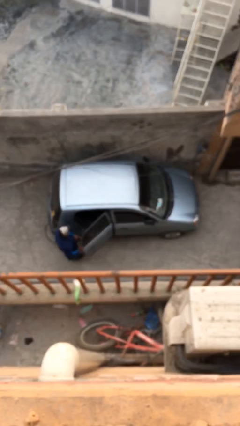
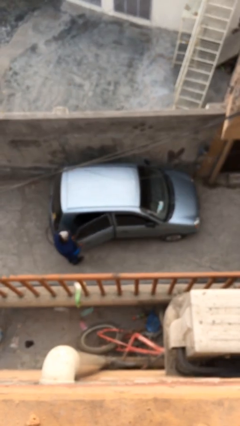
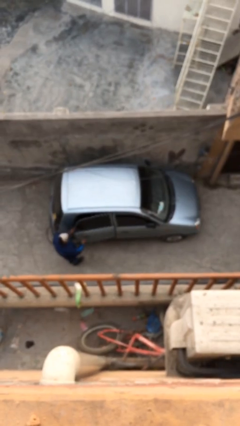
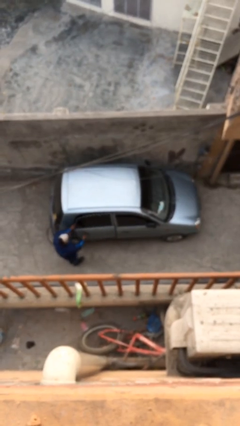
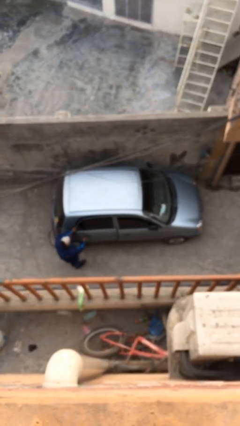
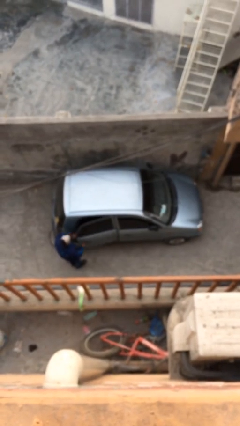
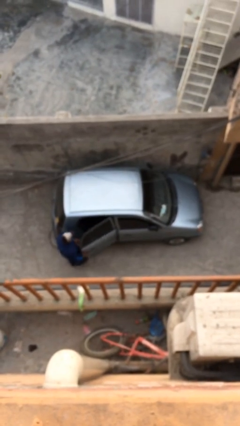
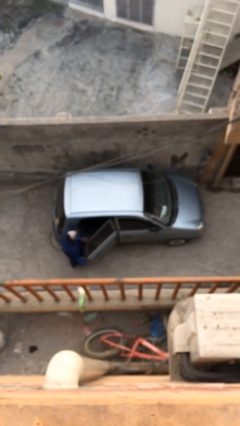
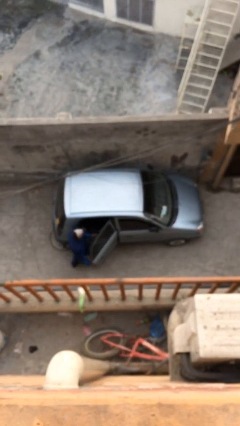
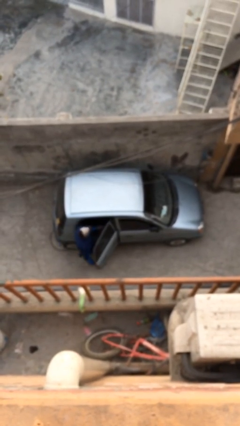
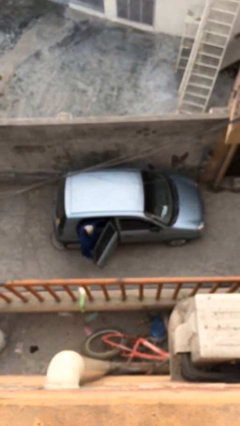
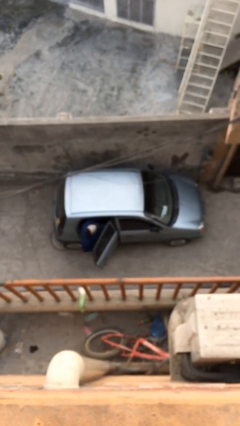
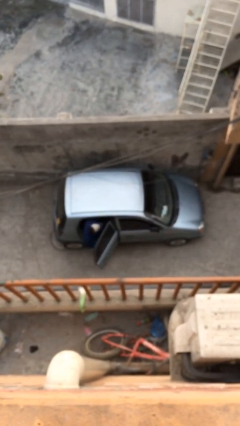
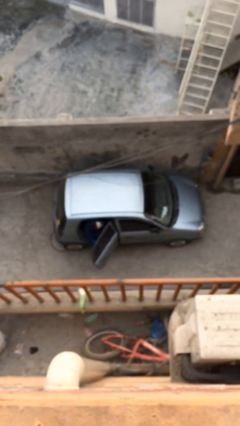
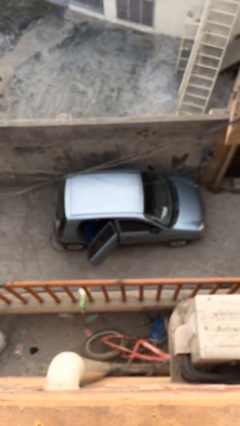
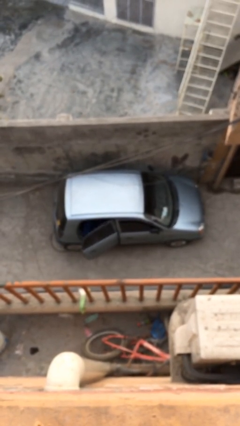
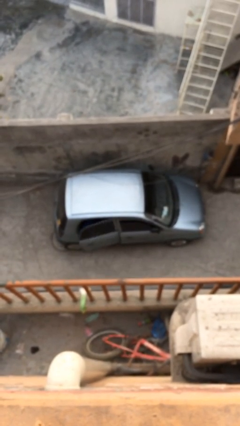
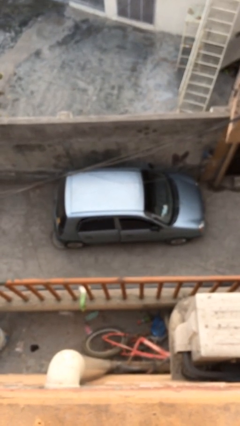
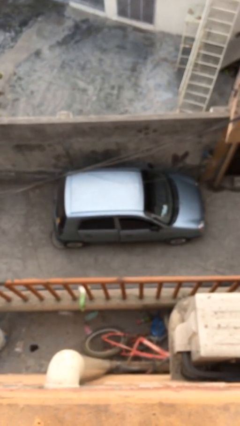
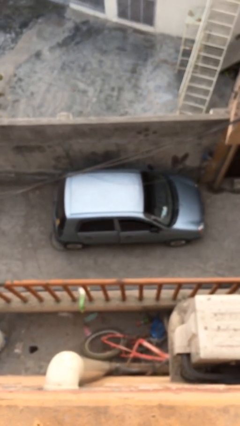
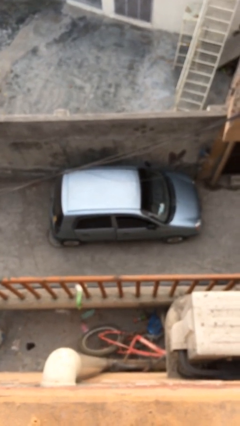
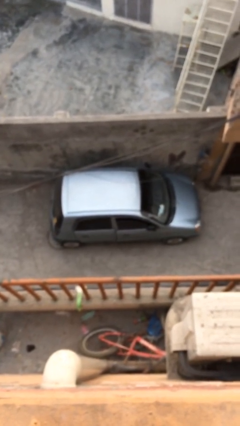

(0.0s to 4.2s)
car picks up person

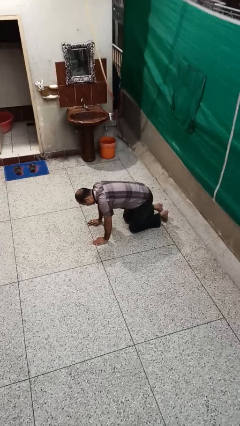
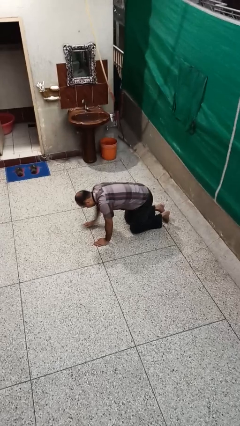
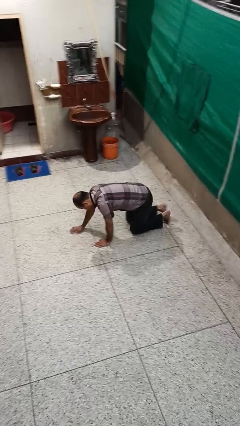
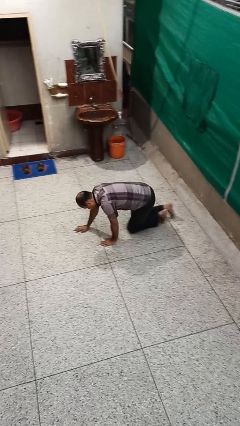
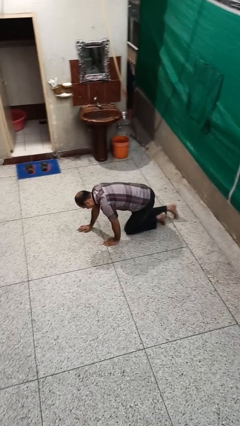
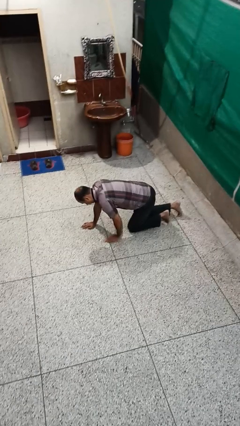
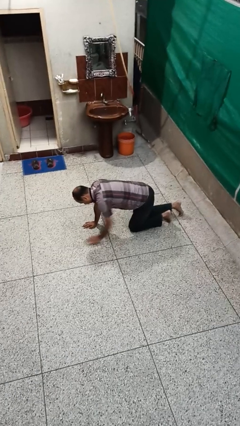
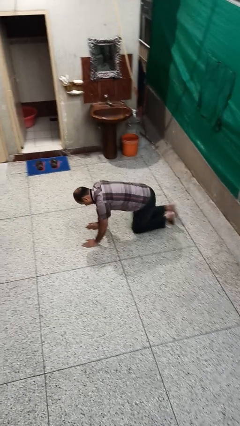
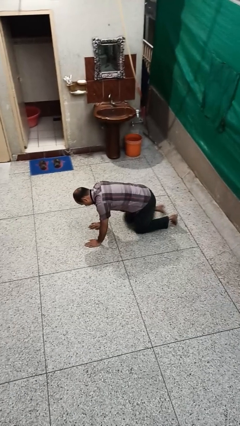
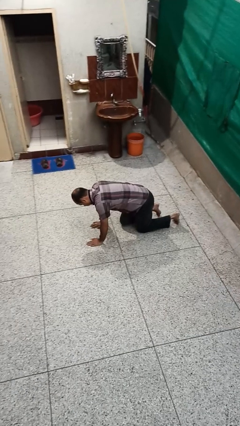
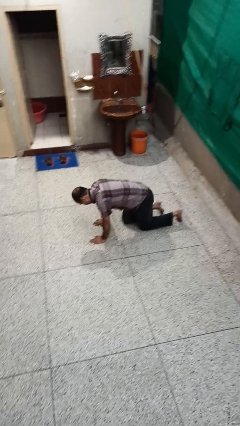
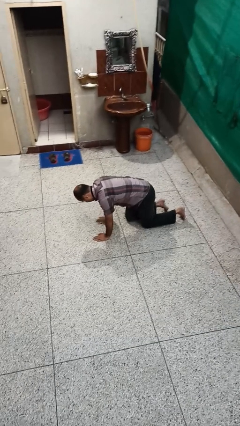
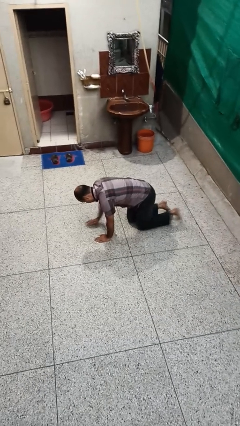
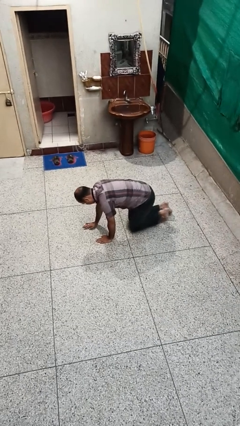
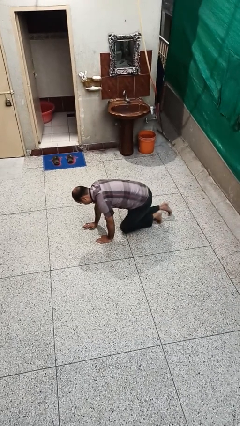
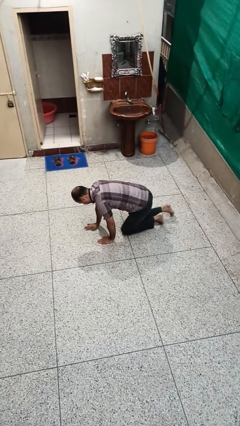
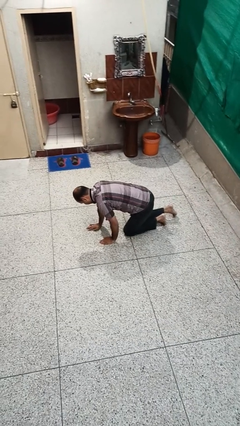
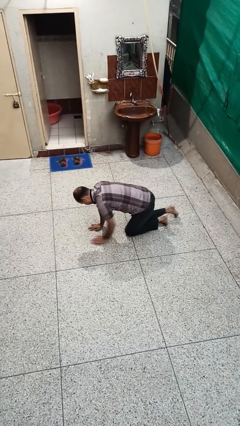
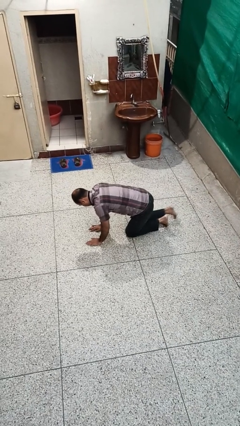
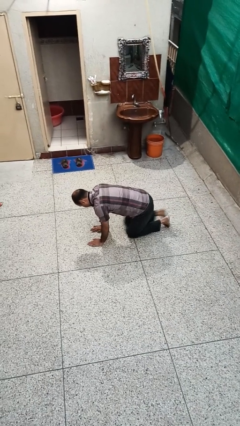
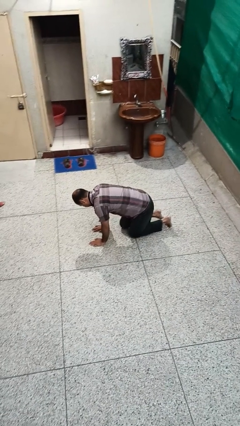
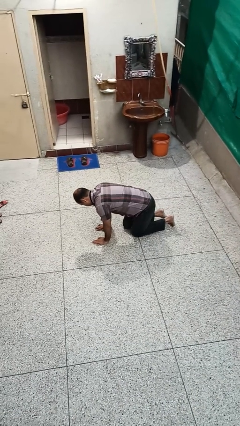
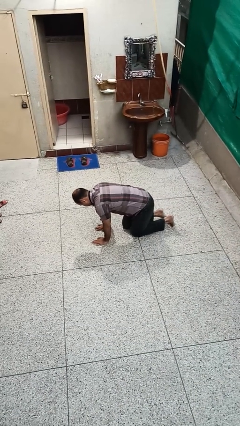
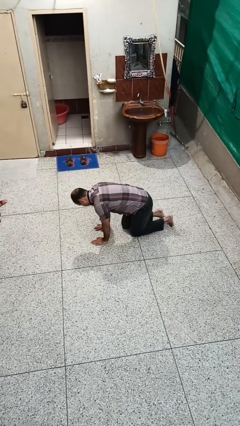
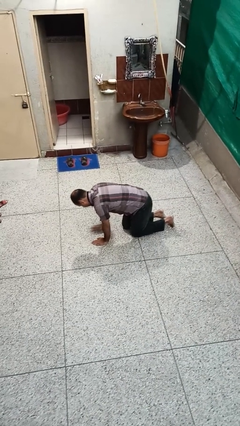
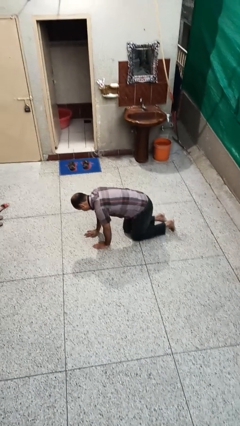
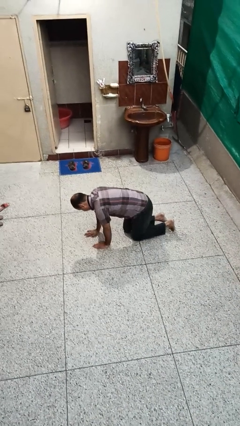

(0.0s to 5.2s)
person crawls

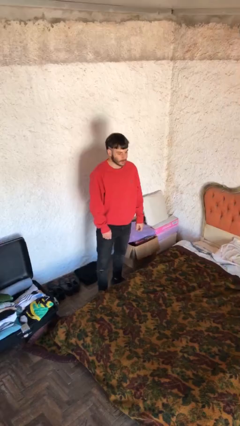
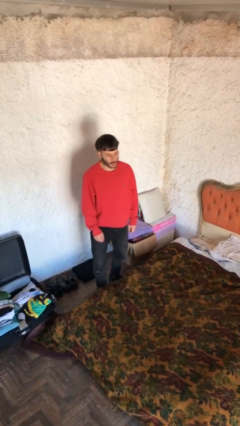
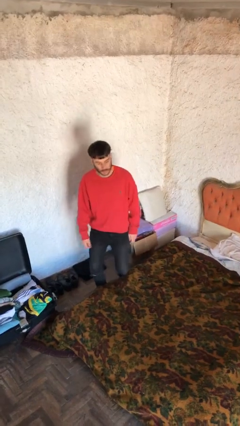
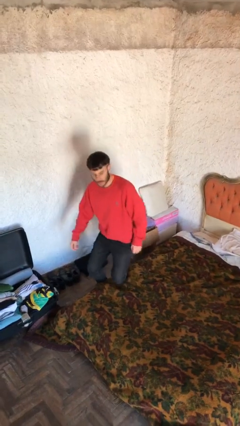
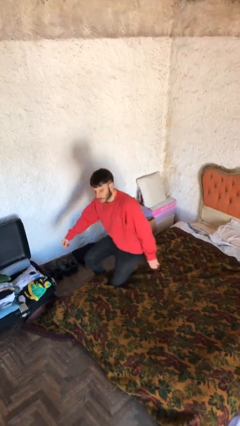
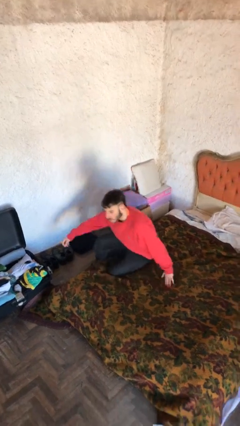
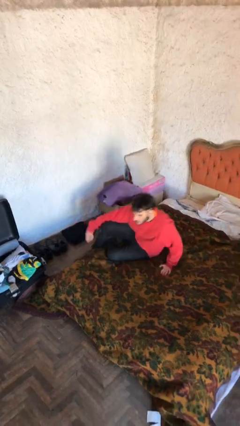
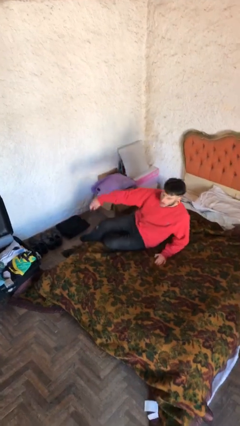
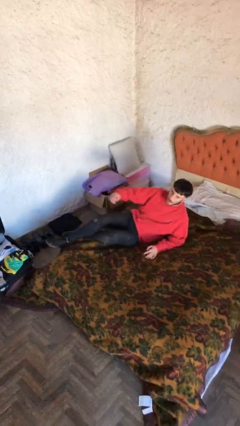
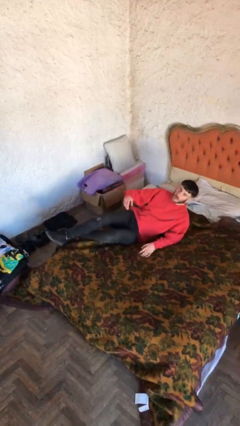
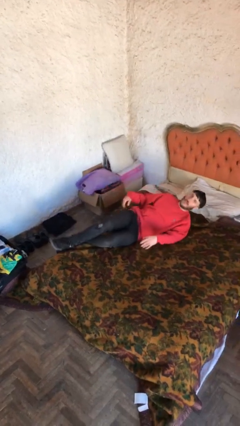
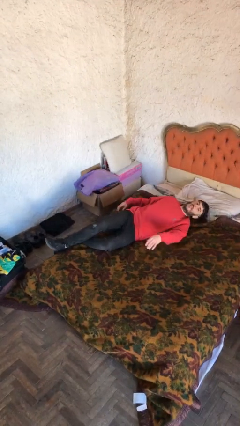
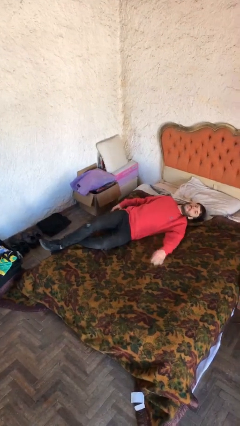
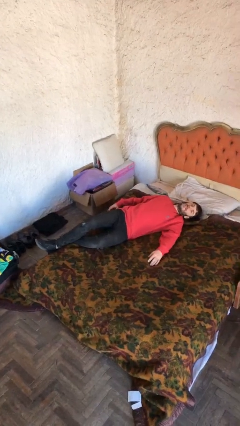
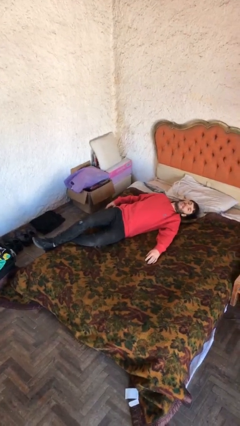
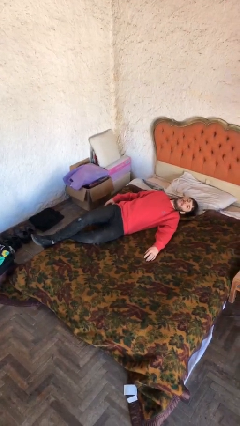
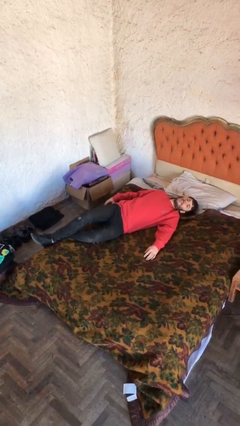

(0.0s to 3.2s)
person lies down on bed

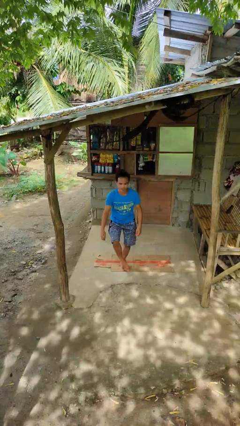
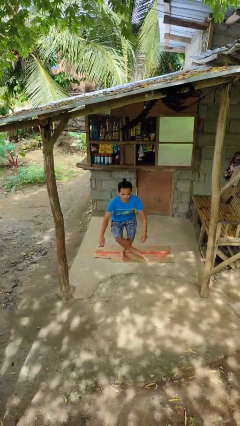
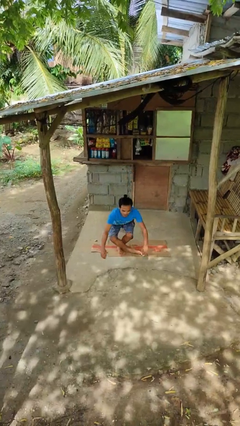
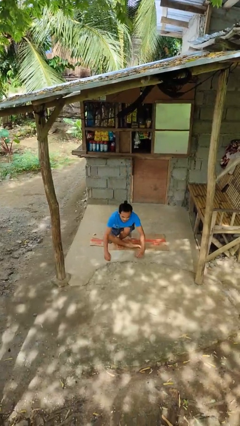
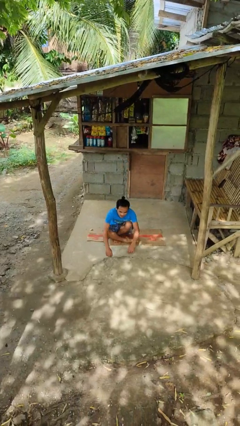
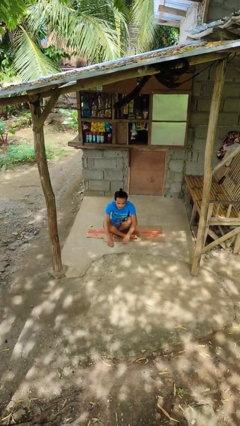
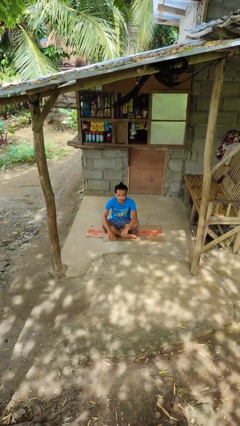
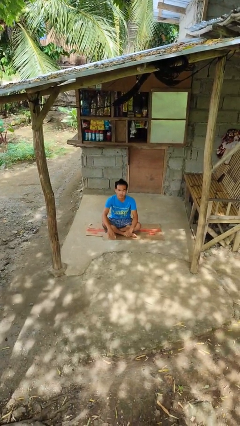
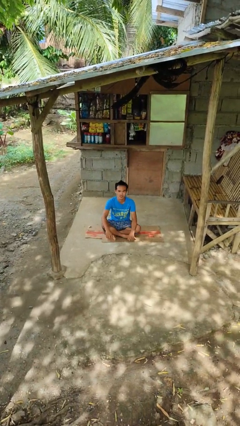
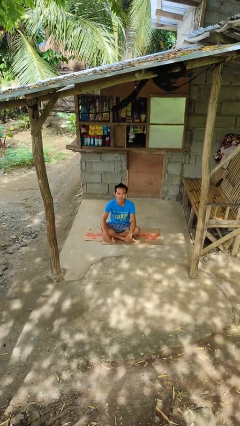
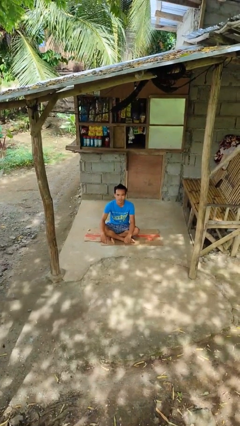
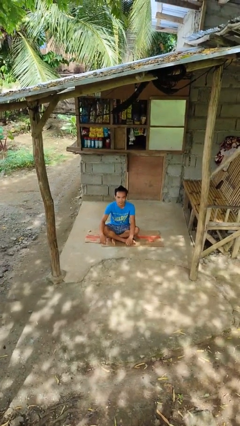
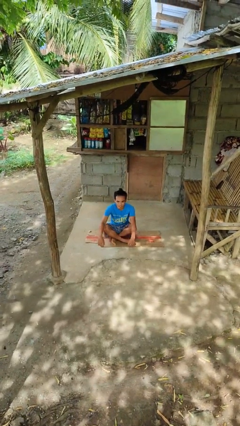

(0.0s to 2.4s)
person sits crisscross

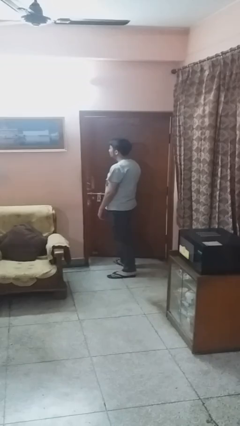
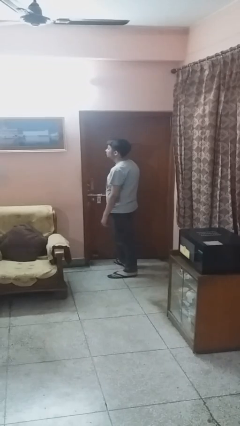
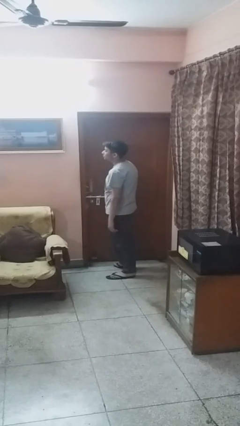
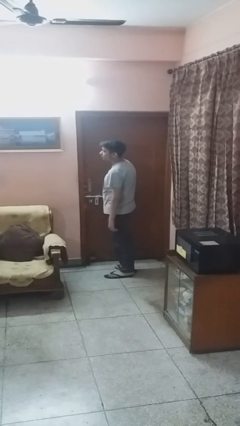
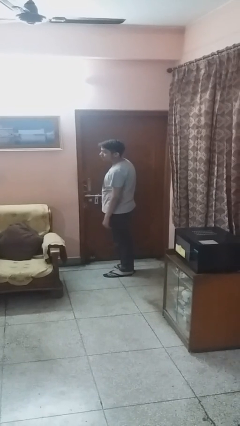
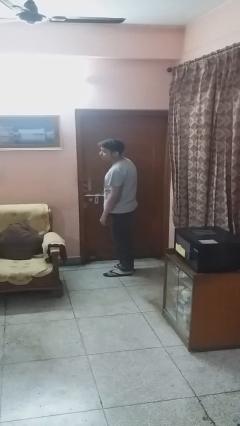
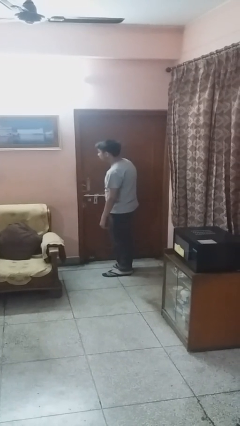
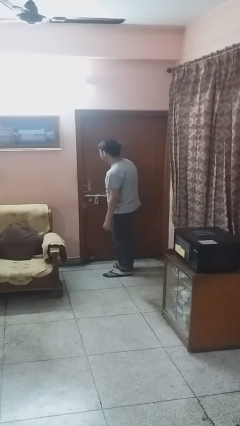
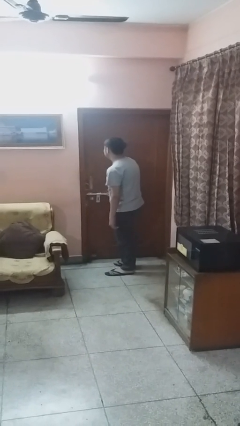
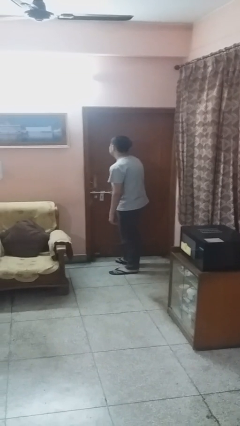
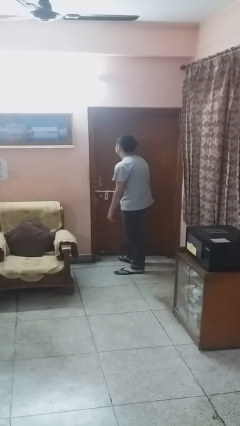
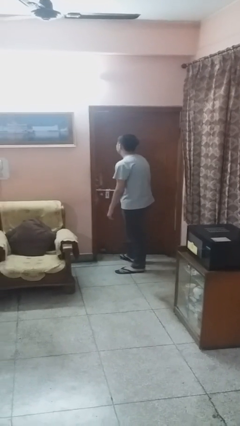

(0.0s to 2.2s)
person closes facility door

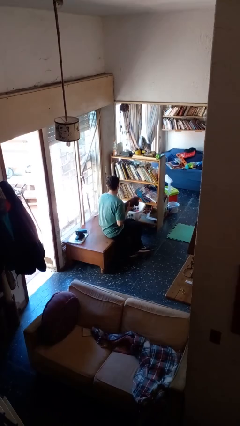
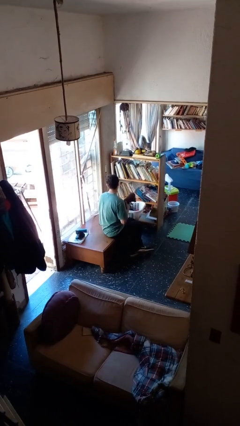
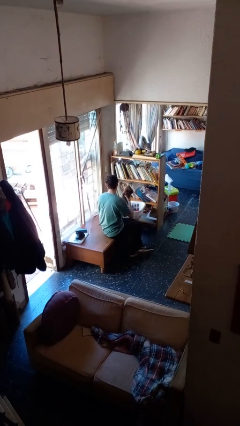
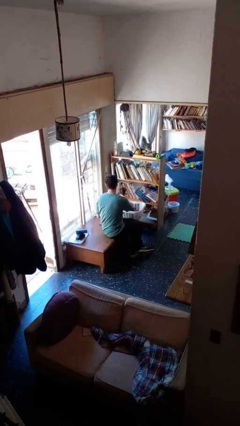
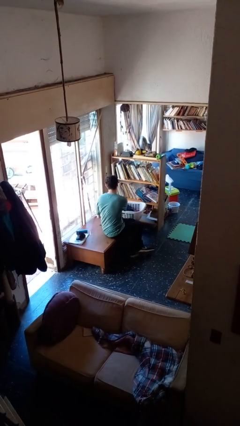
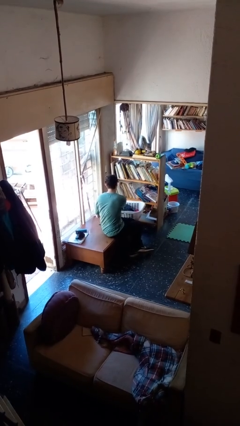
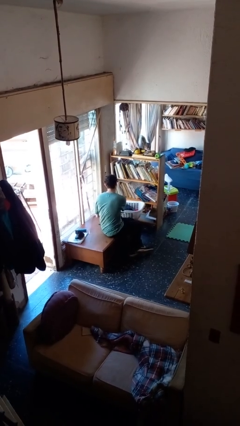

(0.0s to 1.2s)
person puts object into basket
